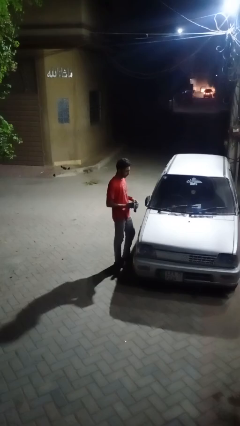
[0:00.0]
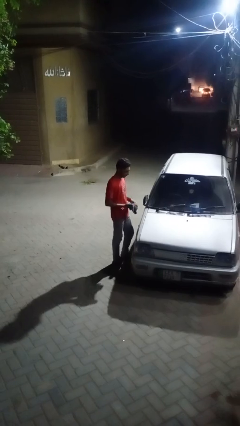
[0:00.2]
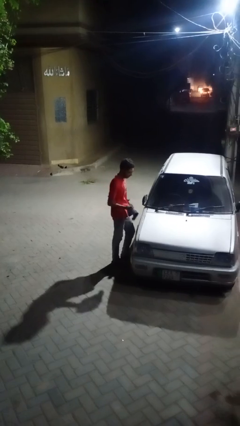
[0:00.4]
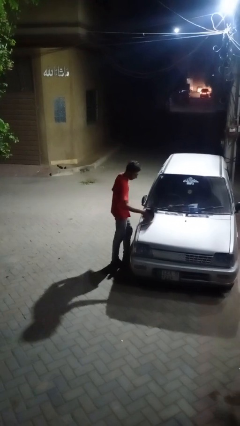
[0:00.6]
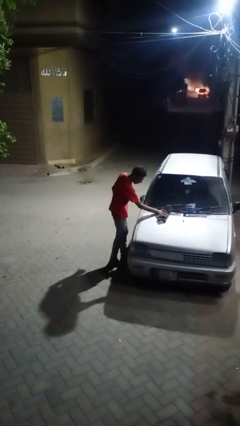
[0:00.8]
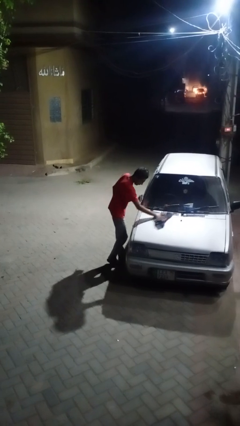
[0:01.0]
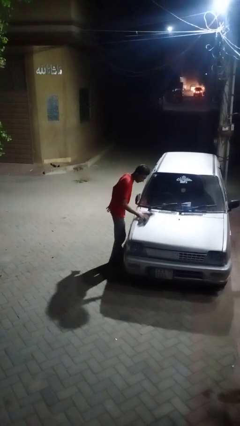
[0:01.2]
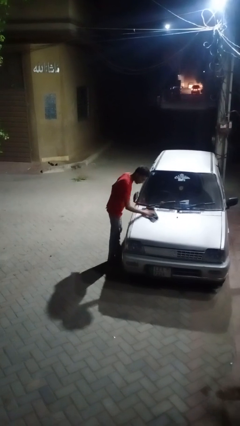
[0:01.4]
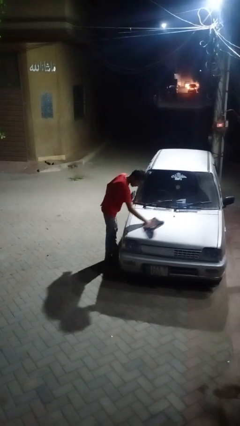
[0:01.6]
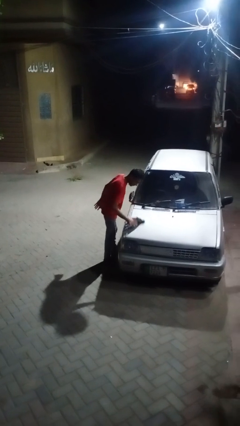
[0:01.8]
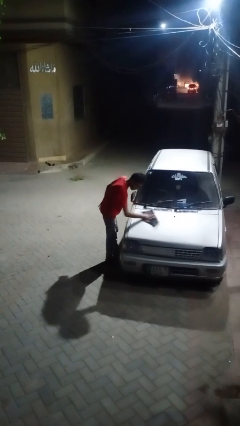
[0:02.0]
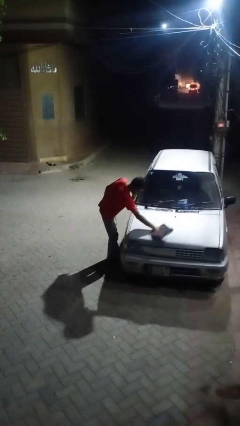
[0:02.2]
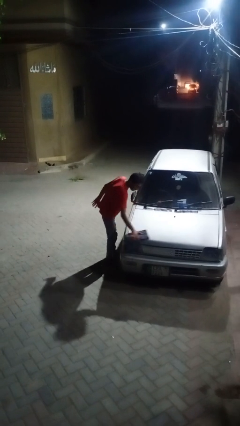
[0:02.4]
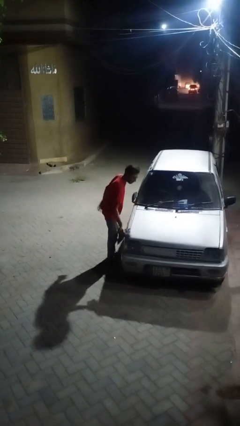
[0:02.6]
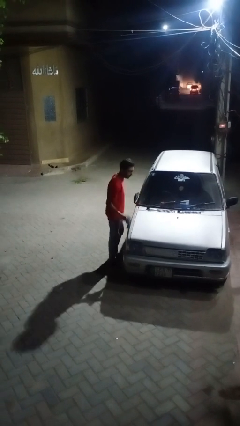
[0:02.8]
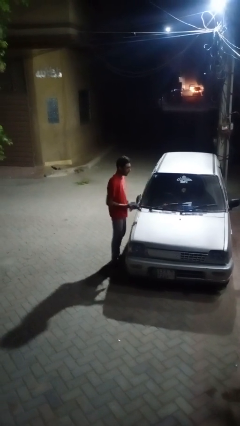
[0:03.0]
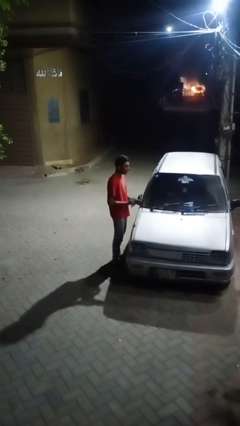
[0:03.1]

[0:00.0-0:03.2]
person polishes car with rag

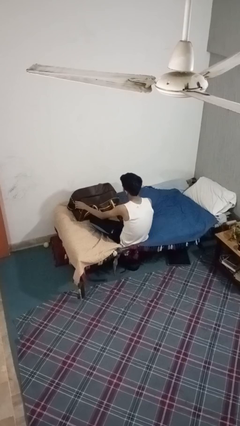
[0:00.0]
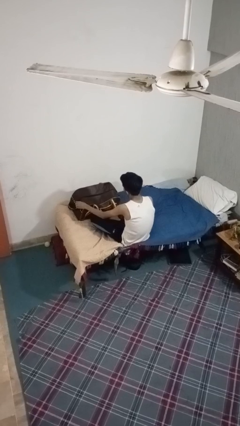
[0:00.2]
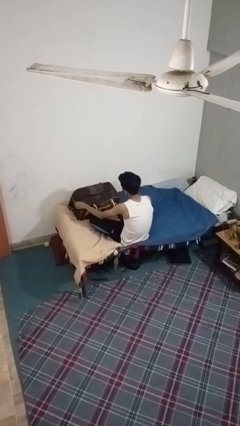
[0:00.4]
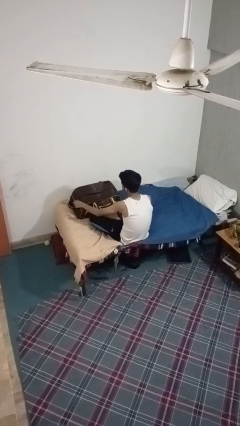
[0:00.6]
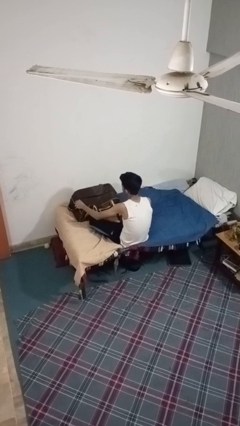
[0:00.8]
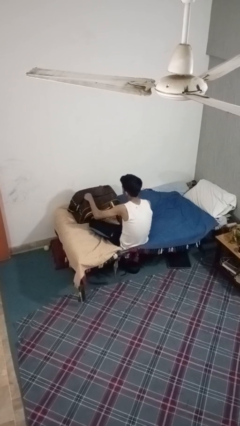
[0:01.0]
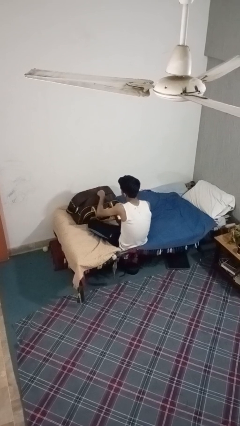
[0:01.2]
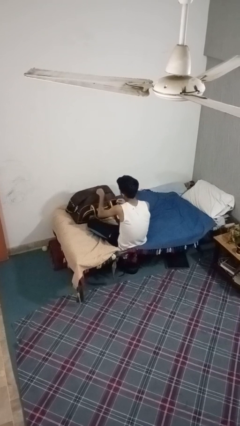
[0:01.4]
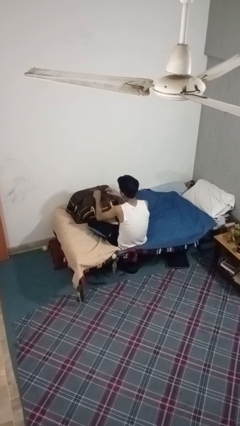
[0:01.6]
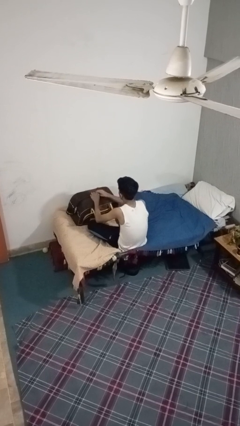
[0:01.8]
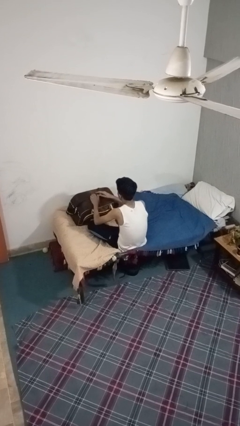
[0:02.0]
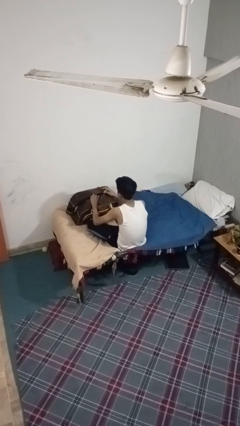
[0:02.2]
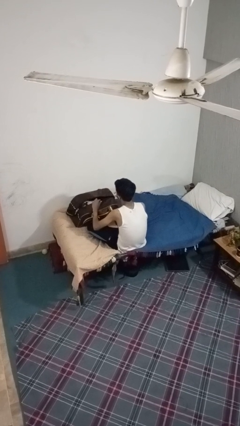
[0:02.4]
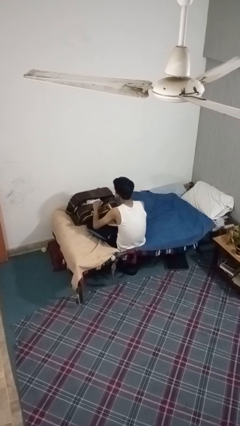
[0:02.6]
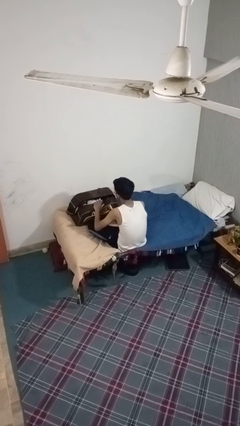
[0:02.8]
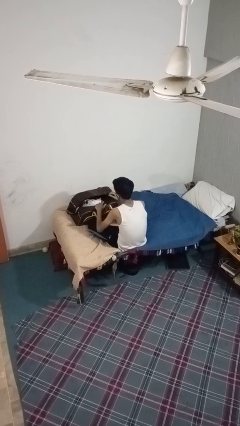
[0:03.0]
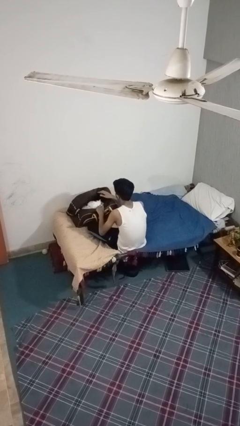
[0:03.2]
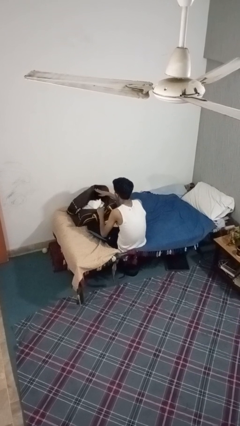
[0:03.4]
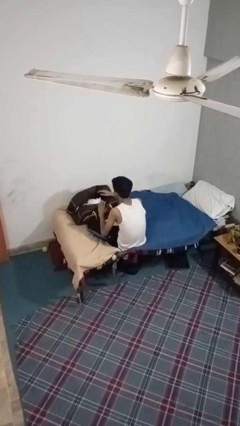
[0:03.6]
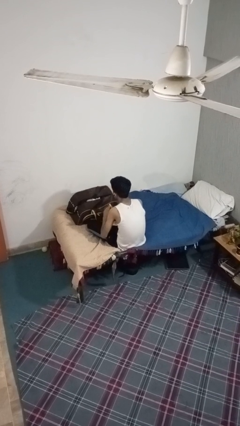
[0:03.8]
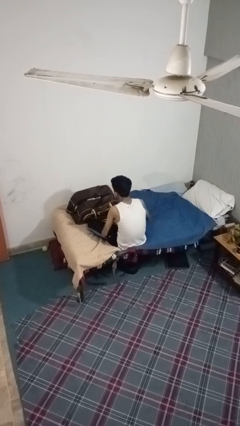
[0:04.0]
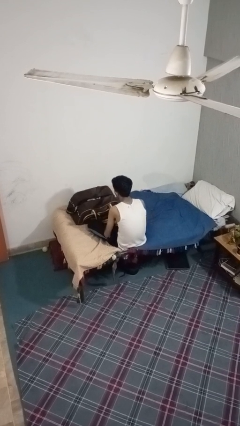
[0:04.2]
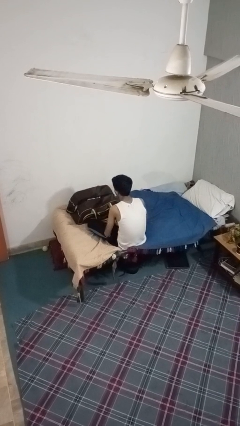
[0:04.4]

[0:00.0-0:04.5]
person opens suitcase

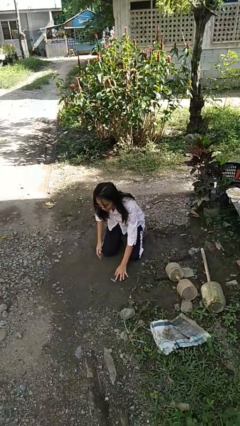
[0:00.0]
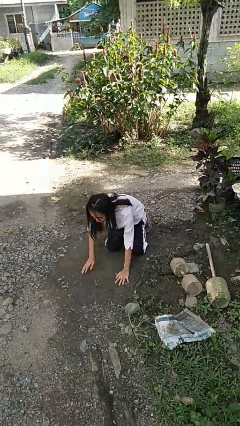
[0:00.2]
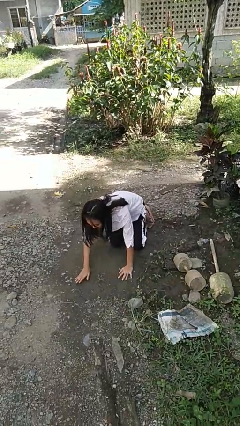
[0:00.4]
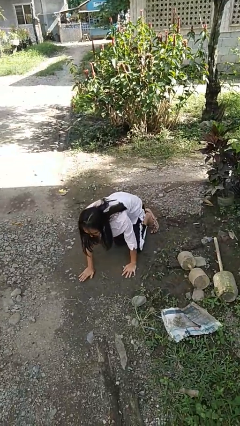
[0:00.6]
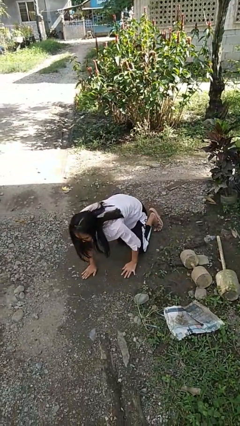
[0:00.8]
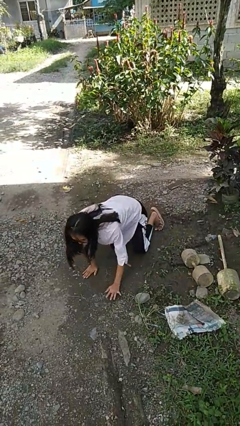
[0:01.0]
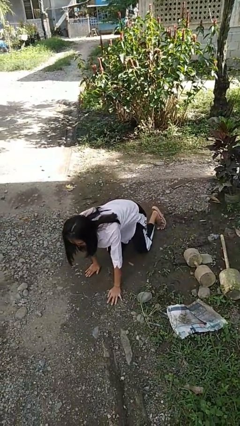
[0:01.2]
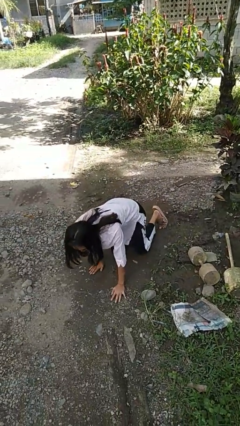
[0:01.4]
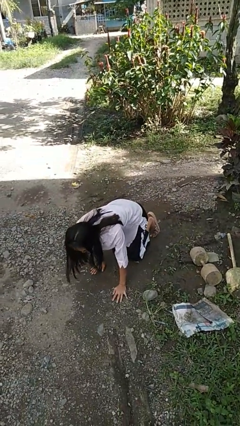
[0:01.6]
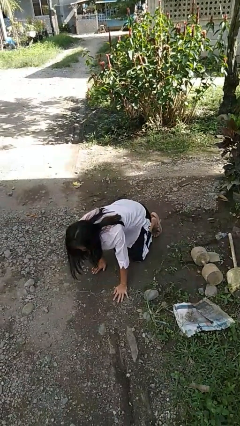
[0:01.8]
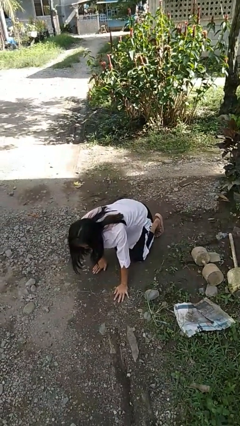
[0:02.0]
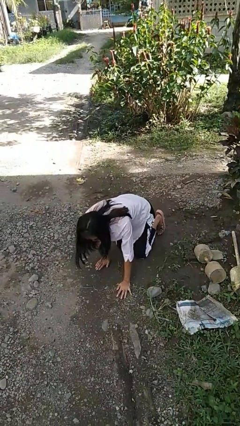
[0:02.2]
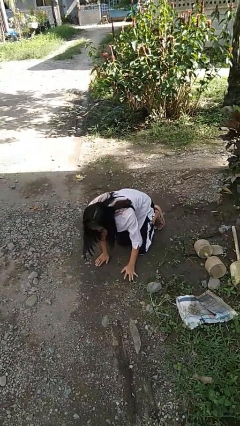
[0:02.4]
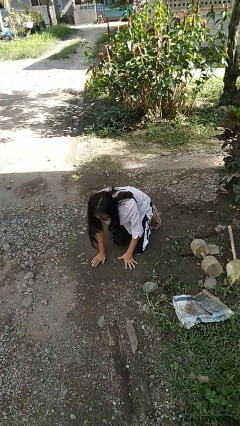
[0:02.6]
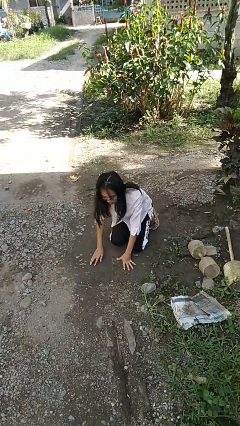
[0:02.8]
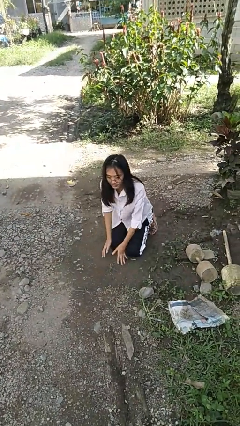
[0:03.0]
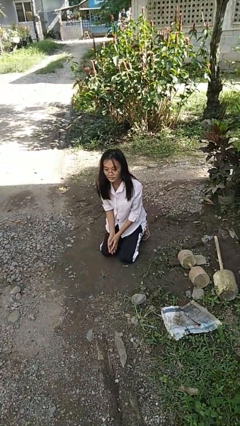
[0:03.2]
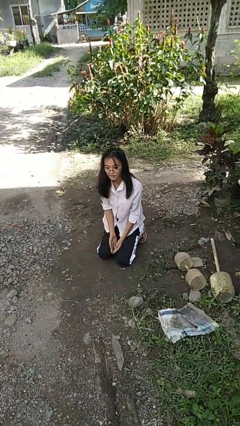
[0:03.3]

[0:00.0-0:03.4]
person crawls

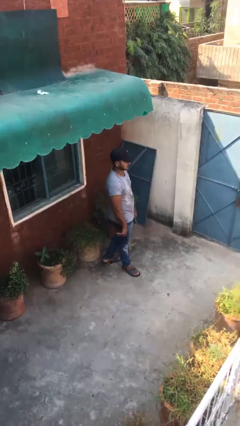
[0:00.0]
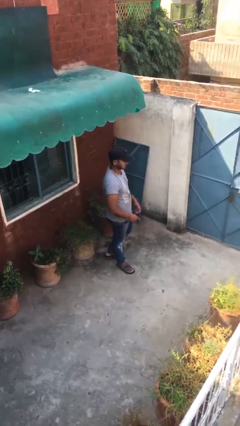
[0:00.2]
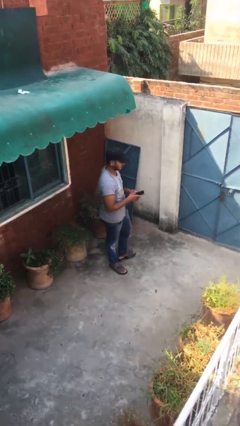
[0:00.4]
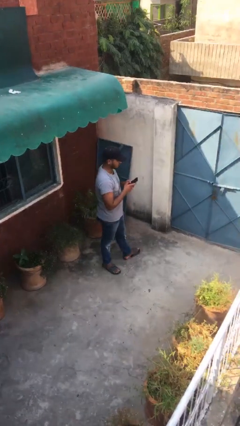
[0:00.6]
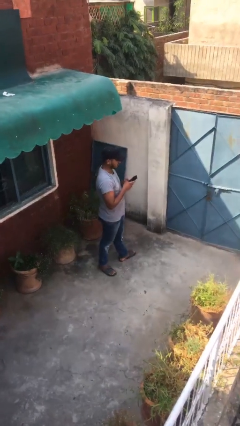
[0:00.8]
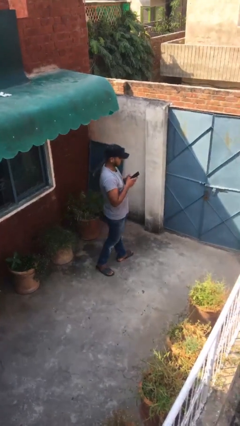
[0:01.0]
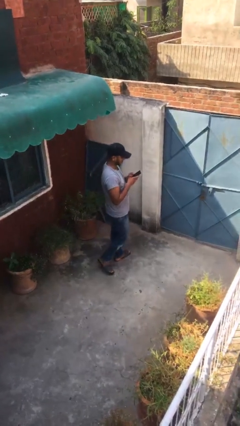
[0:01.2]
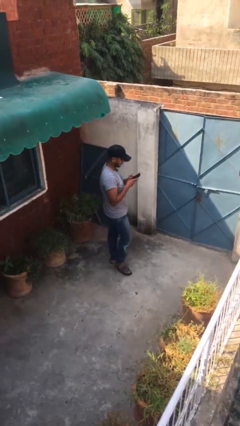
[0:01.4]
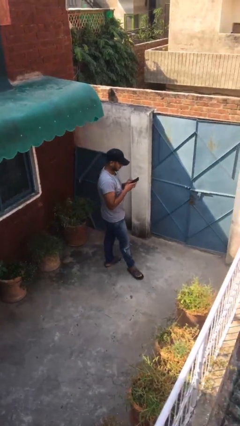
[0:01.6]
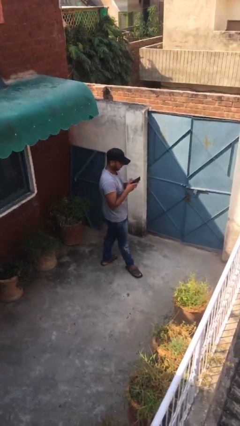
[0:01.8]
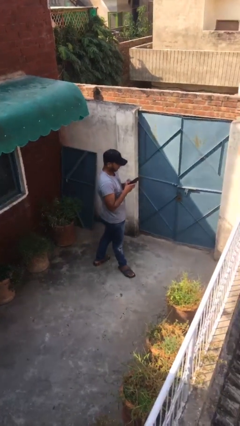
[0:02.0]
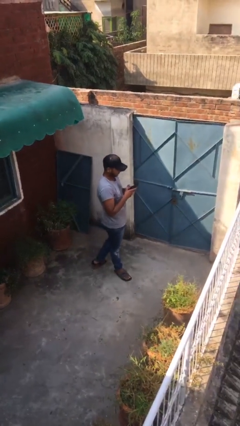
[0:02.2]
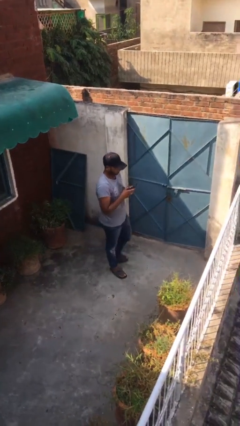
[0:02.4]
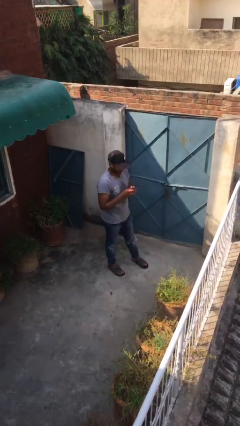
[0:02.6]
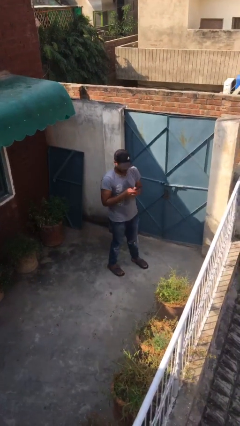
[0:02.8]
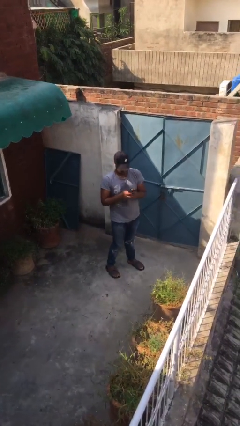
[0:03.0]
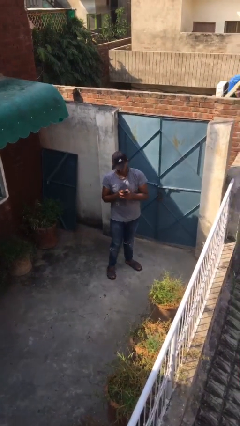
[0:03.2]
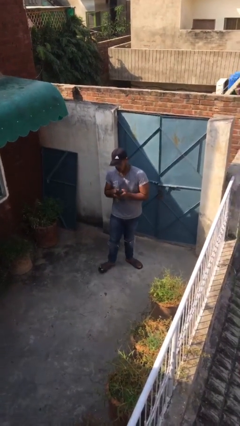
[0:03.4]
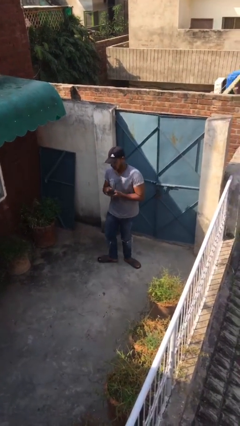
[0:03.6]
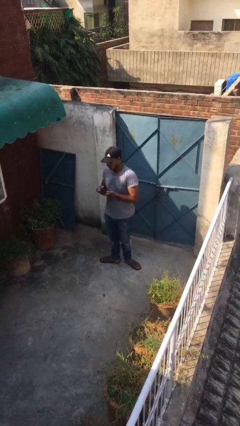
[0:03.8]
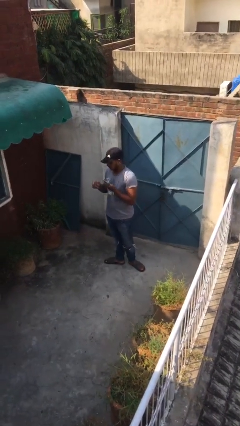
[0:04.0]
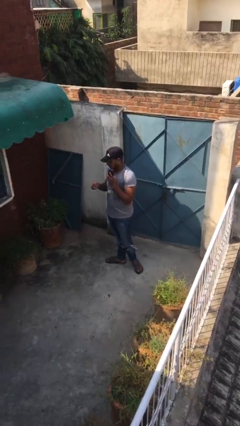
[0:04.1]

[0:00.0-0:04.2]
person texts on phone

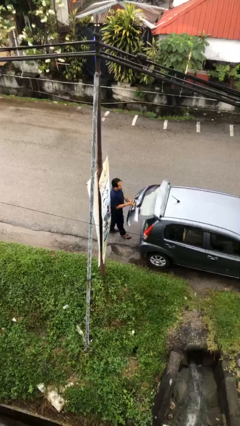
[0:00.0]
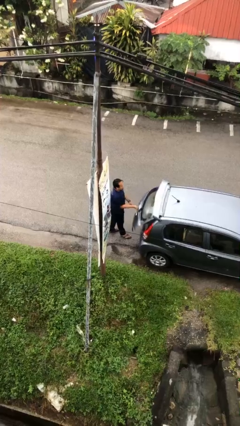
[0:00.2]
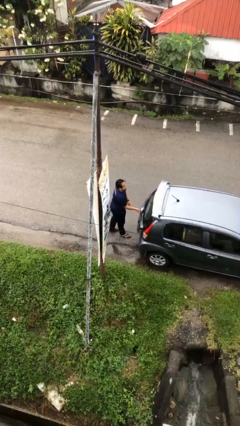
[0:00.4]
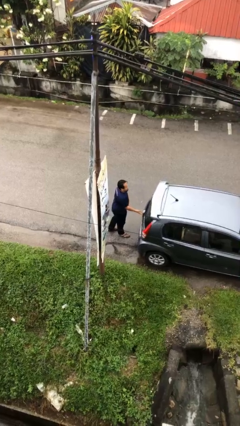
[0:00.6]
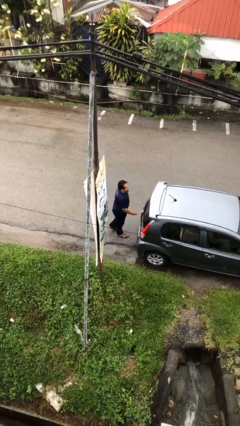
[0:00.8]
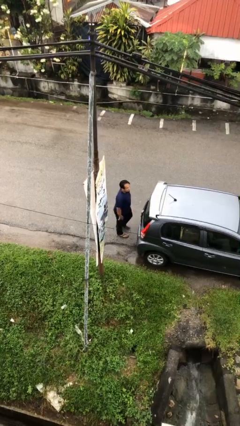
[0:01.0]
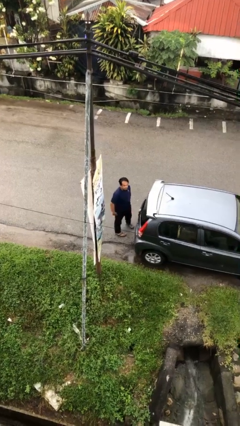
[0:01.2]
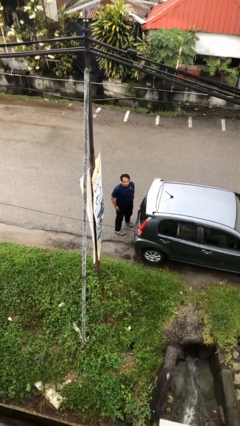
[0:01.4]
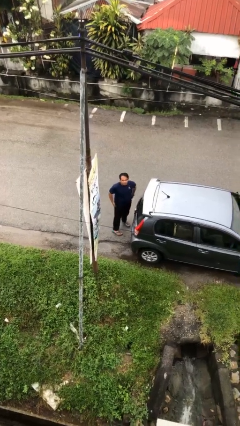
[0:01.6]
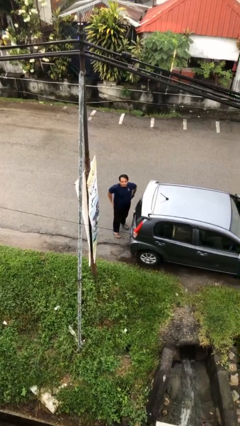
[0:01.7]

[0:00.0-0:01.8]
person closes car trunk

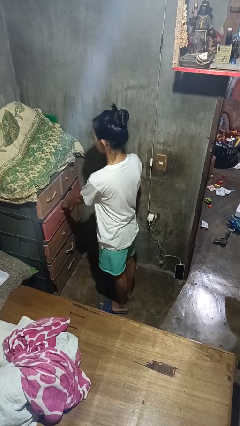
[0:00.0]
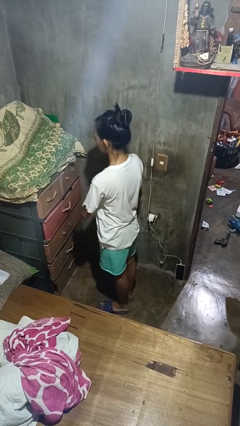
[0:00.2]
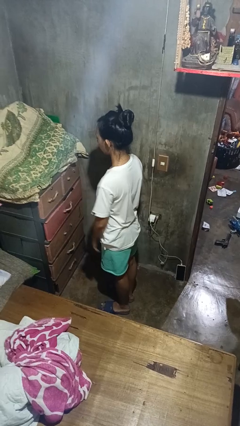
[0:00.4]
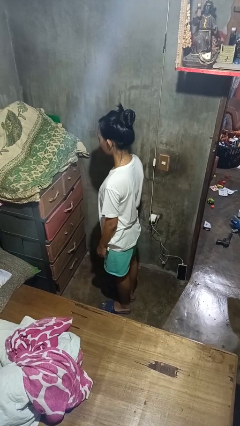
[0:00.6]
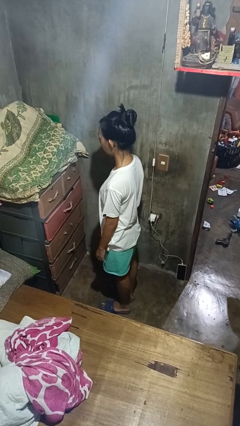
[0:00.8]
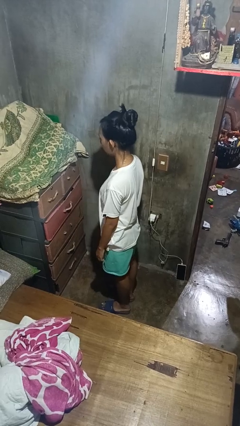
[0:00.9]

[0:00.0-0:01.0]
person closes dresser drawer
